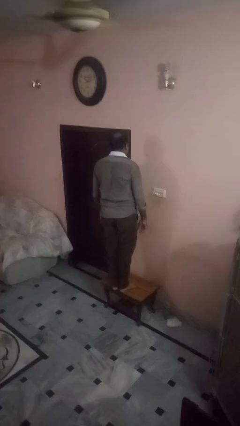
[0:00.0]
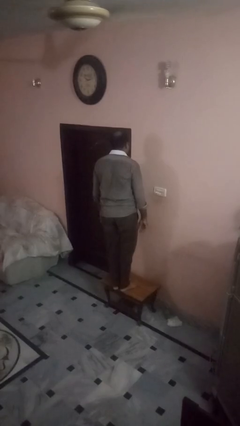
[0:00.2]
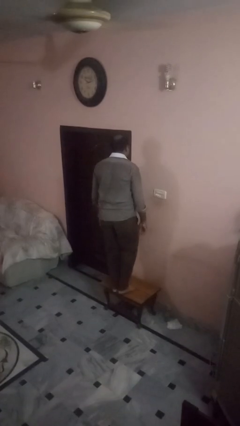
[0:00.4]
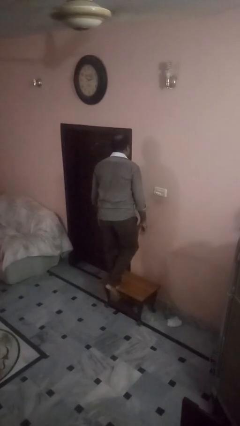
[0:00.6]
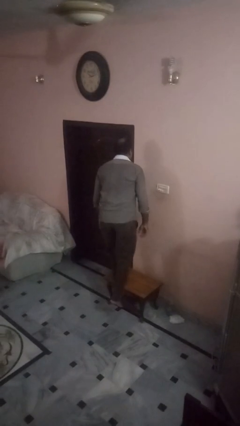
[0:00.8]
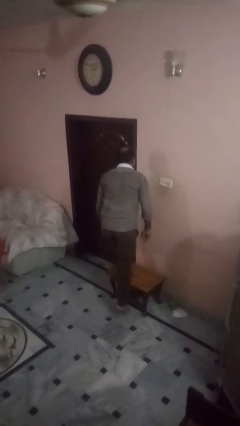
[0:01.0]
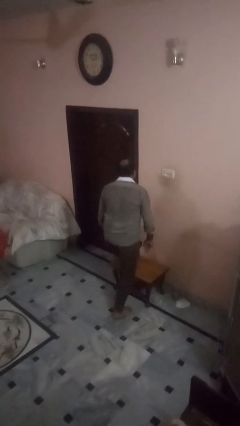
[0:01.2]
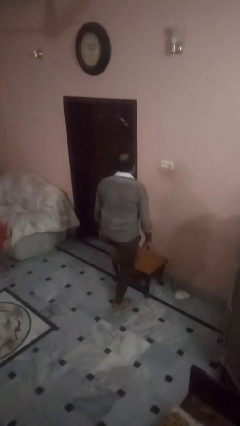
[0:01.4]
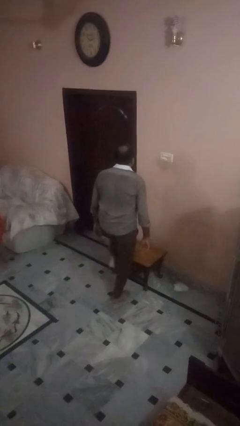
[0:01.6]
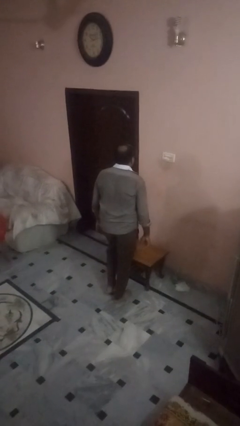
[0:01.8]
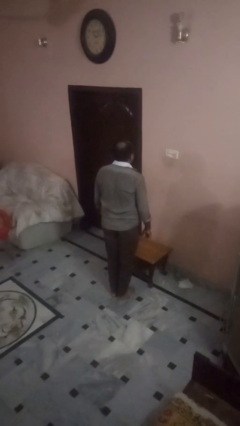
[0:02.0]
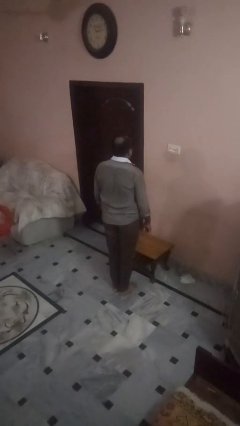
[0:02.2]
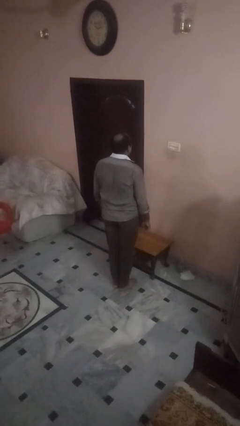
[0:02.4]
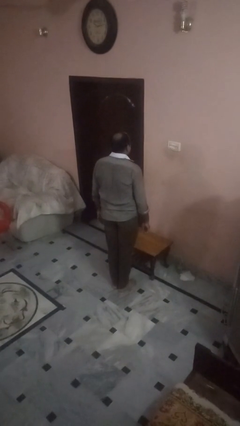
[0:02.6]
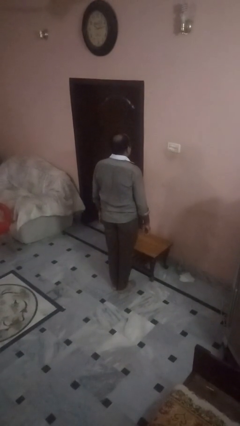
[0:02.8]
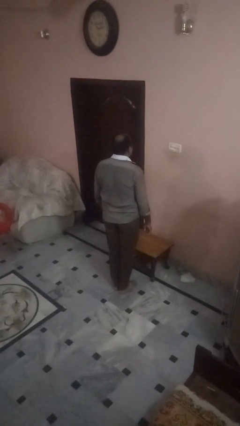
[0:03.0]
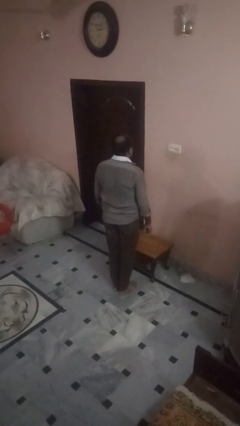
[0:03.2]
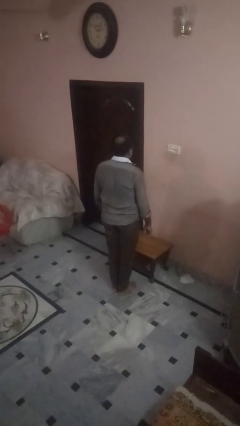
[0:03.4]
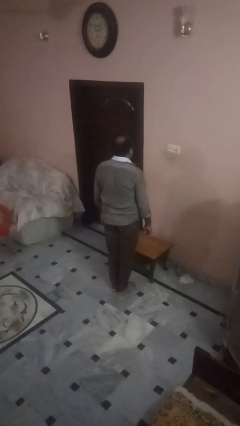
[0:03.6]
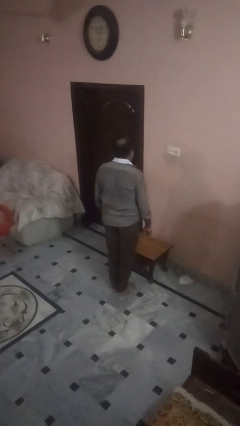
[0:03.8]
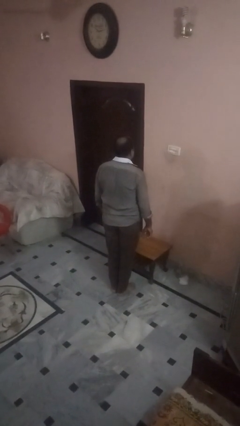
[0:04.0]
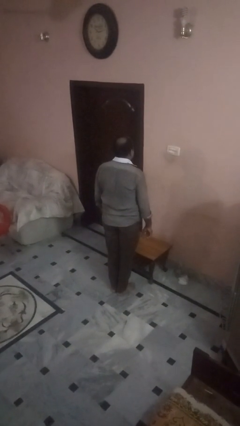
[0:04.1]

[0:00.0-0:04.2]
person climbs off table

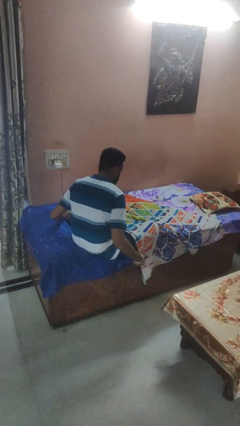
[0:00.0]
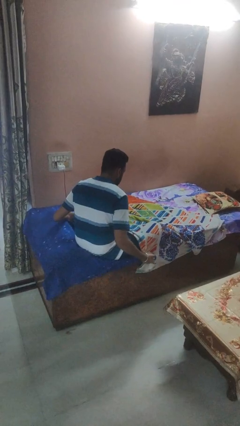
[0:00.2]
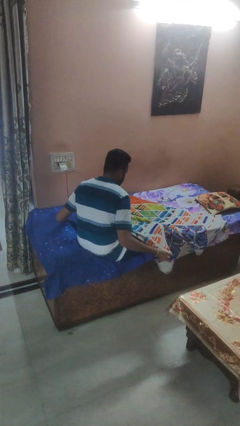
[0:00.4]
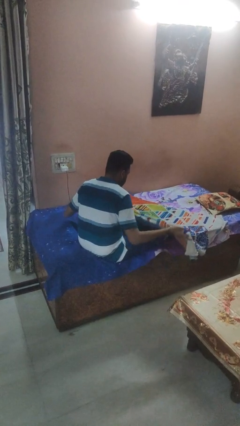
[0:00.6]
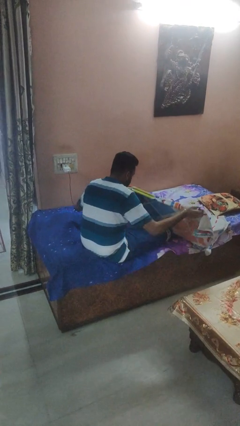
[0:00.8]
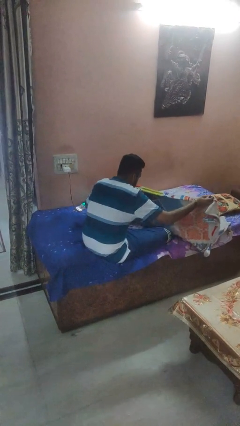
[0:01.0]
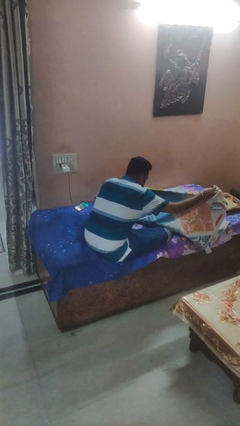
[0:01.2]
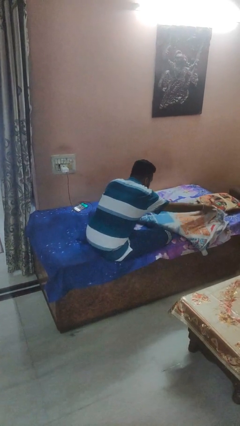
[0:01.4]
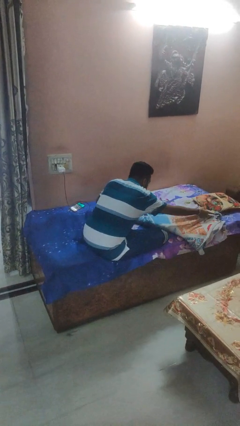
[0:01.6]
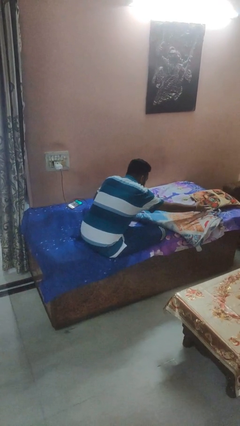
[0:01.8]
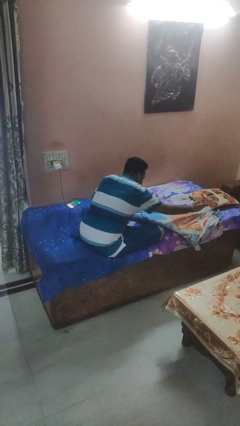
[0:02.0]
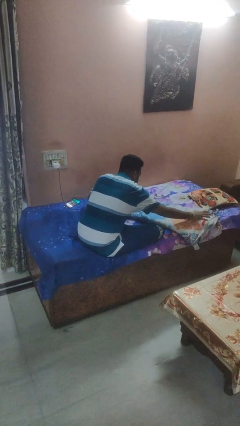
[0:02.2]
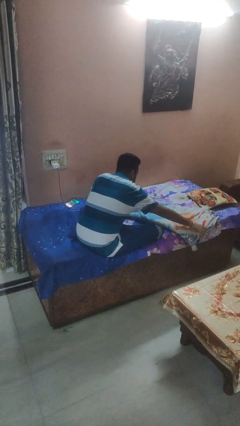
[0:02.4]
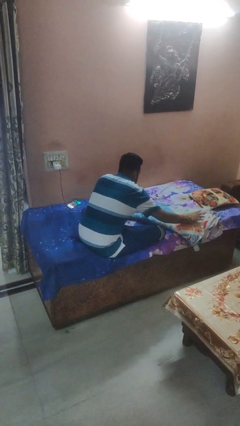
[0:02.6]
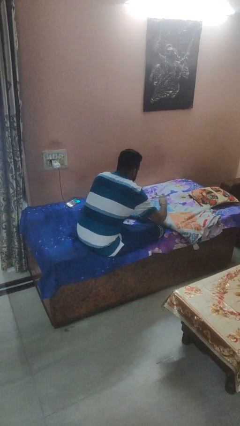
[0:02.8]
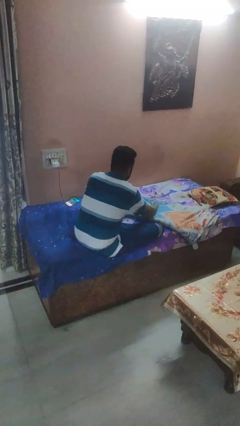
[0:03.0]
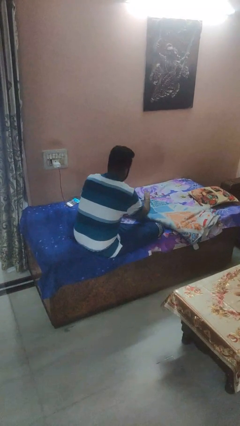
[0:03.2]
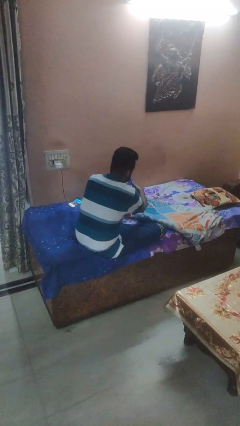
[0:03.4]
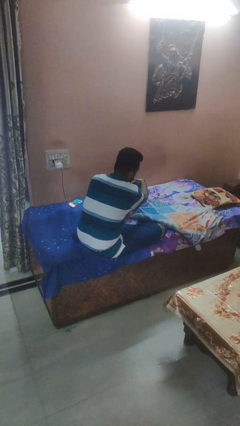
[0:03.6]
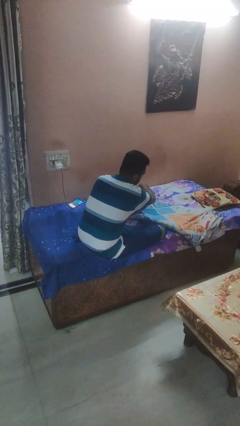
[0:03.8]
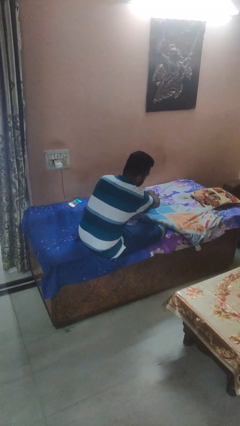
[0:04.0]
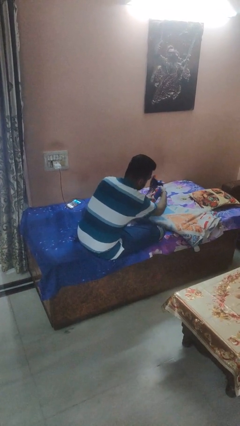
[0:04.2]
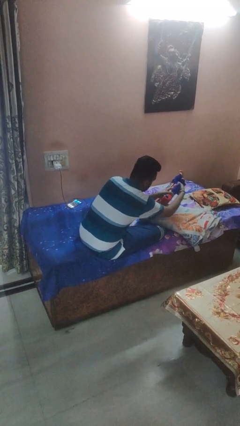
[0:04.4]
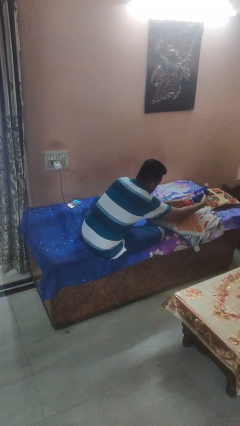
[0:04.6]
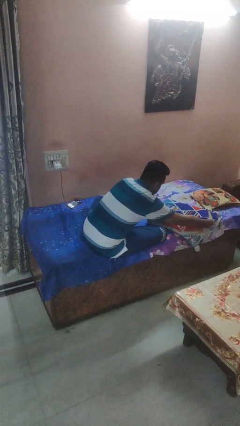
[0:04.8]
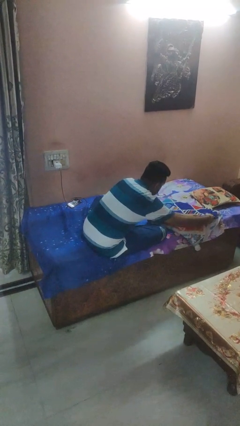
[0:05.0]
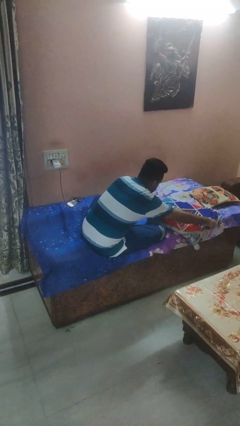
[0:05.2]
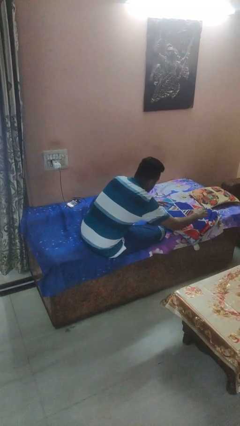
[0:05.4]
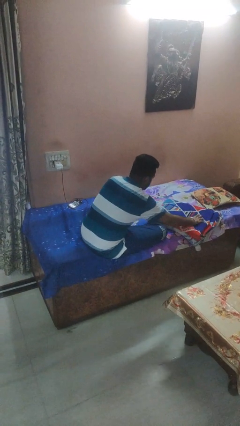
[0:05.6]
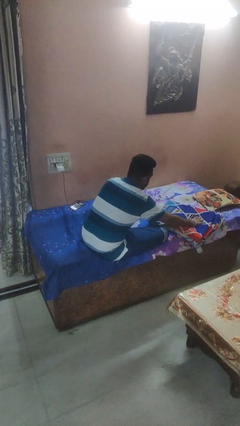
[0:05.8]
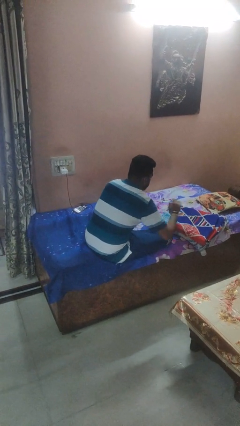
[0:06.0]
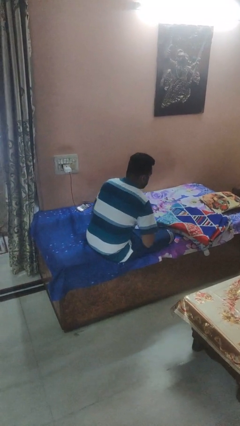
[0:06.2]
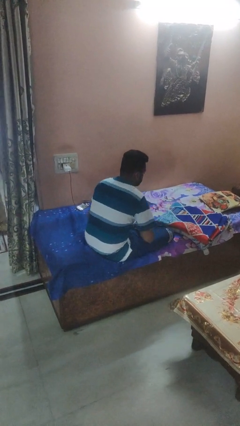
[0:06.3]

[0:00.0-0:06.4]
person folds blanket

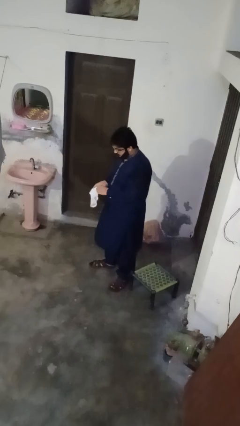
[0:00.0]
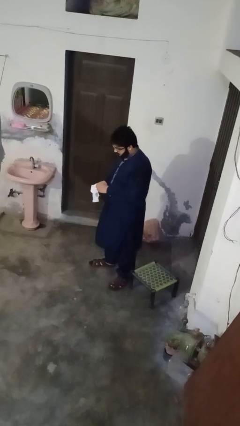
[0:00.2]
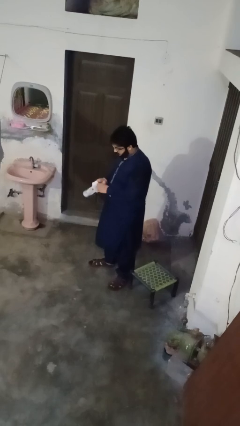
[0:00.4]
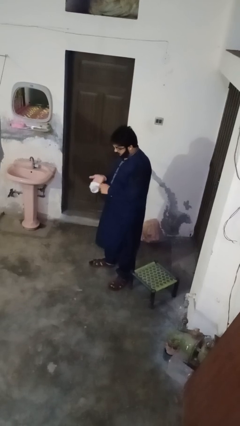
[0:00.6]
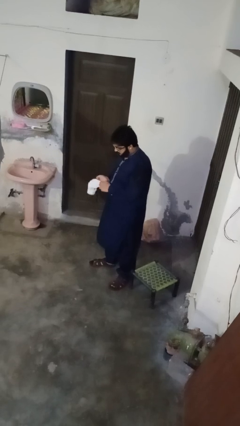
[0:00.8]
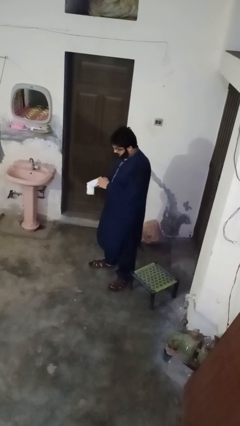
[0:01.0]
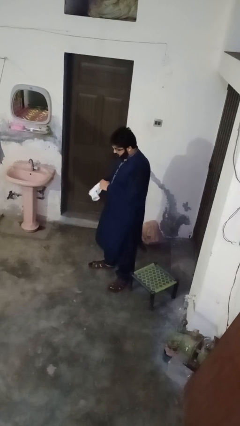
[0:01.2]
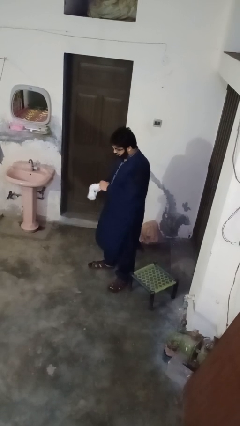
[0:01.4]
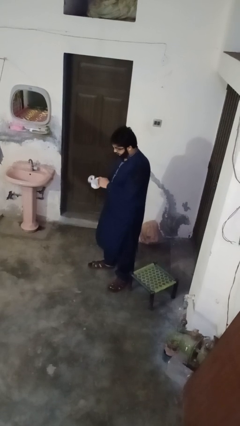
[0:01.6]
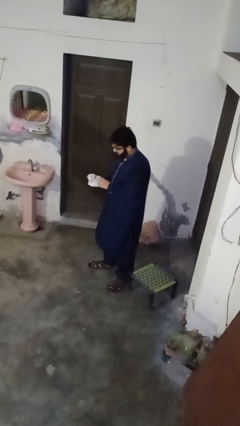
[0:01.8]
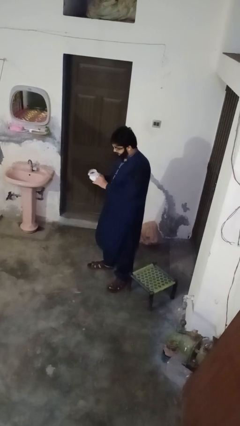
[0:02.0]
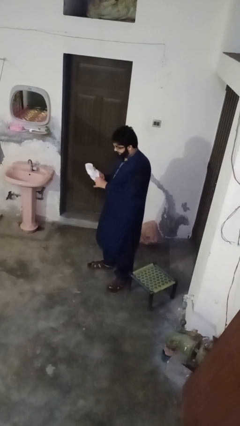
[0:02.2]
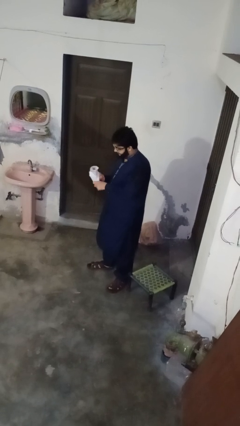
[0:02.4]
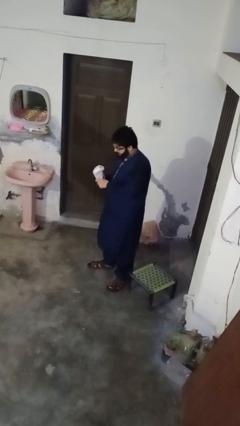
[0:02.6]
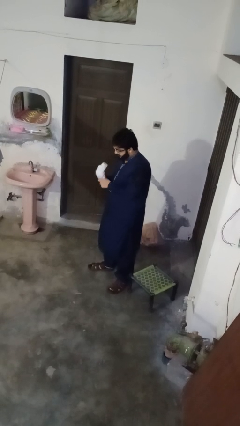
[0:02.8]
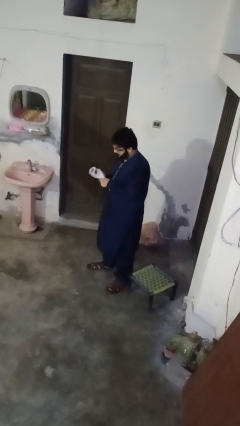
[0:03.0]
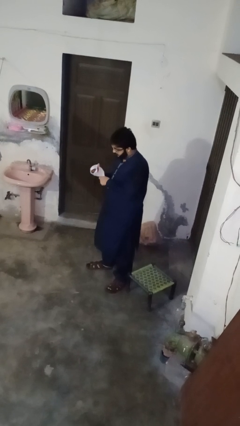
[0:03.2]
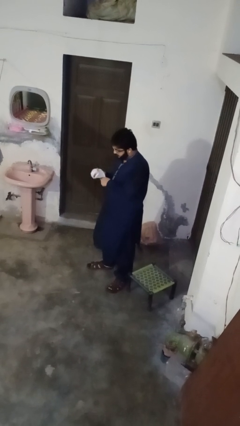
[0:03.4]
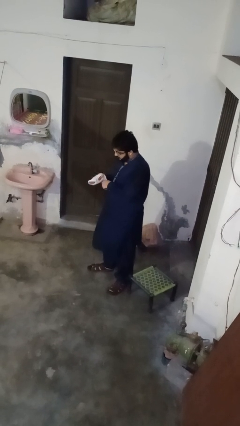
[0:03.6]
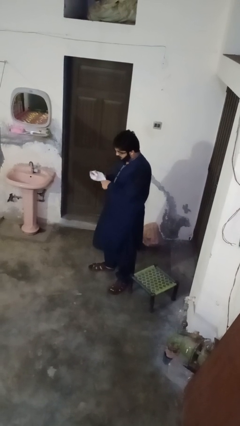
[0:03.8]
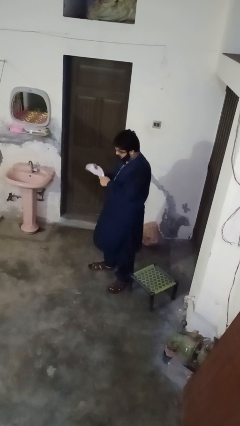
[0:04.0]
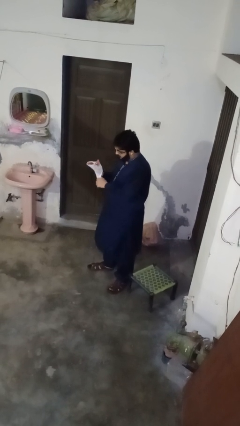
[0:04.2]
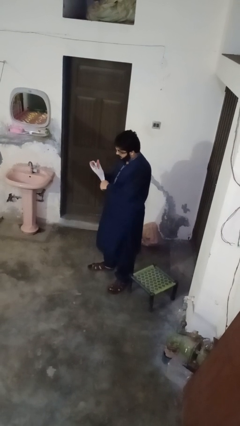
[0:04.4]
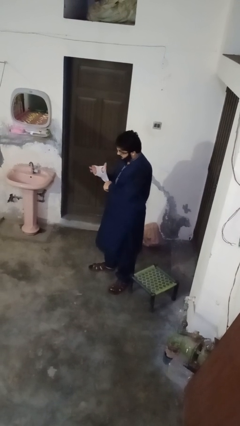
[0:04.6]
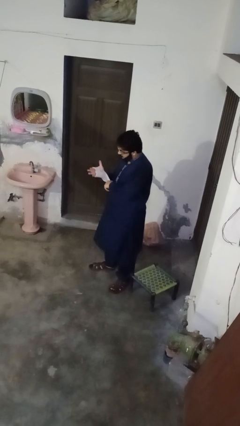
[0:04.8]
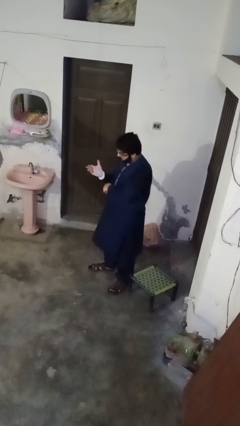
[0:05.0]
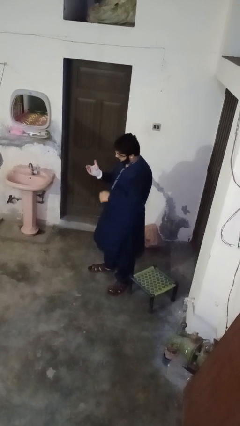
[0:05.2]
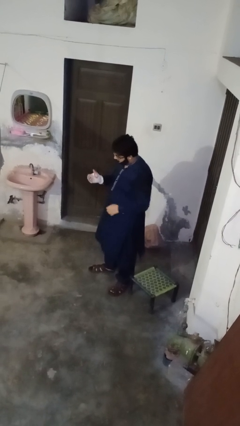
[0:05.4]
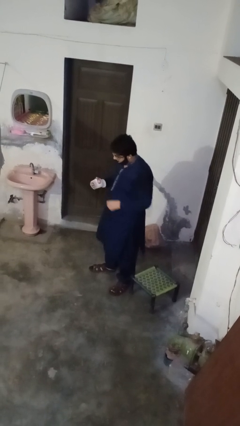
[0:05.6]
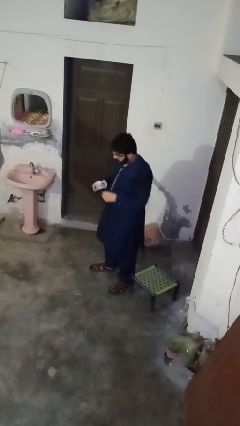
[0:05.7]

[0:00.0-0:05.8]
person puts on gloves

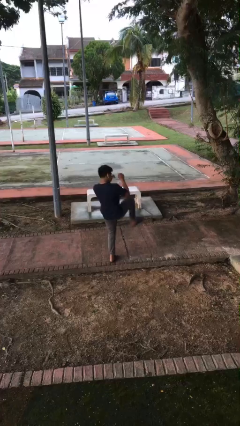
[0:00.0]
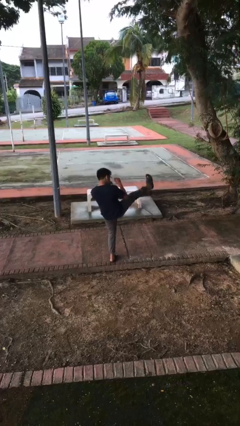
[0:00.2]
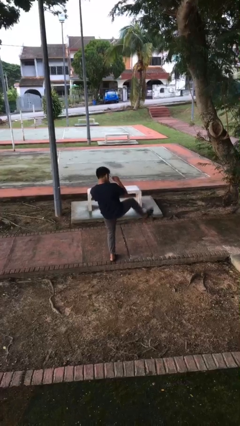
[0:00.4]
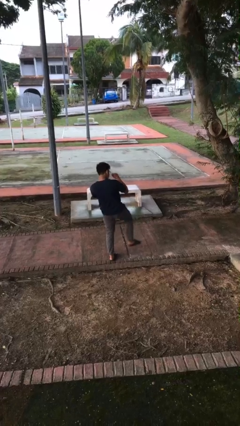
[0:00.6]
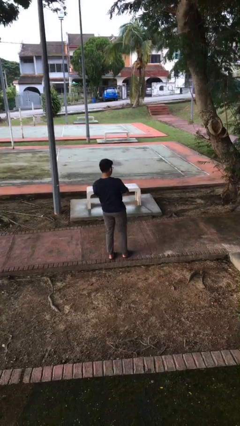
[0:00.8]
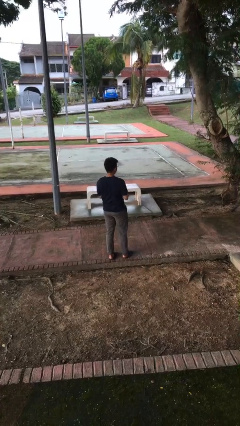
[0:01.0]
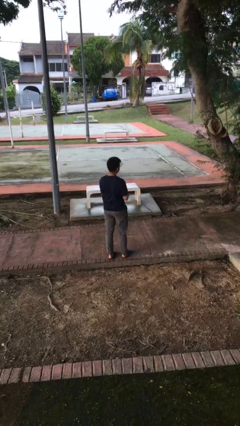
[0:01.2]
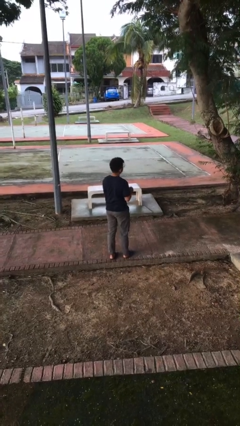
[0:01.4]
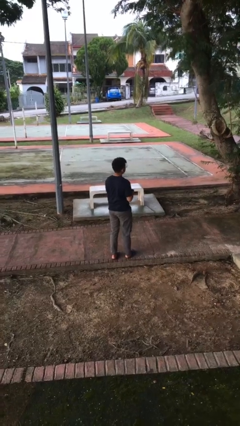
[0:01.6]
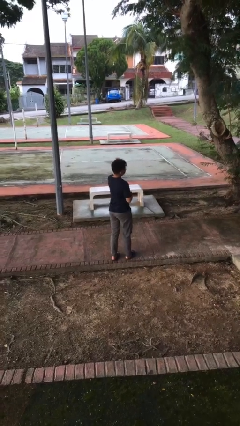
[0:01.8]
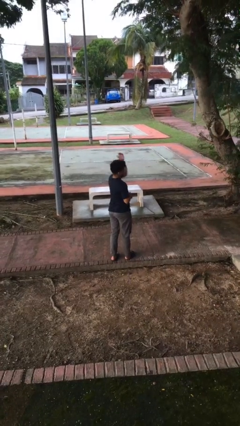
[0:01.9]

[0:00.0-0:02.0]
person karate kicks
